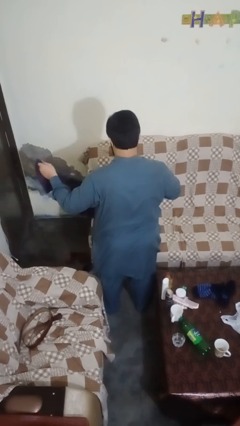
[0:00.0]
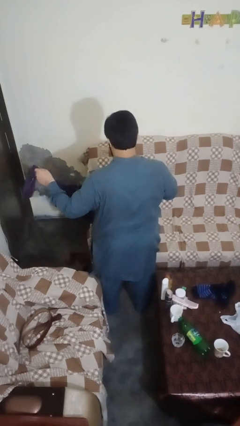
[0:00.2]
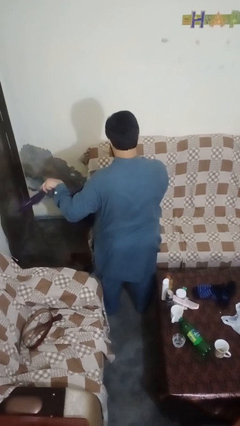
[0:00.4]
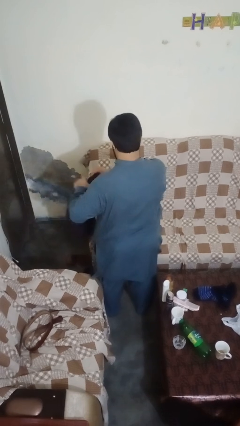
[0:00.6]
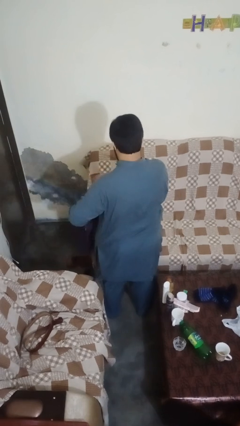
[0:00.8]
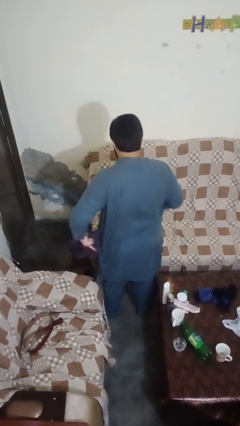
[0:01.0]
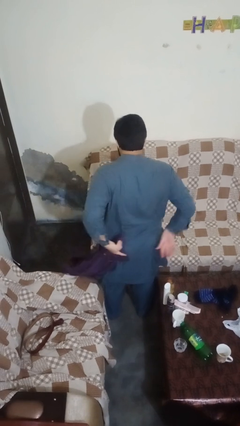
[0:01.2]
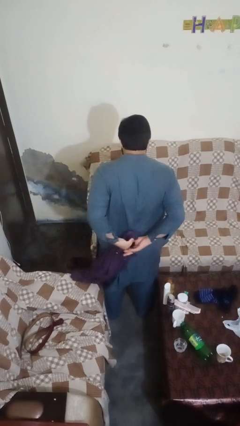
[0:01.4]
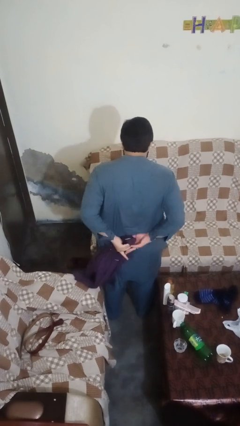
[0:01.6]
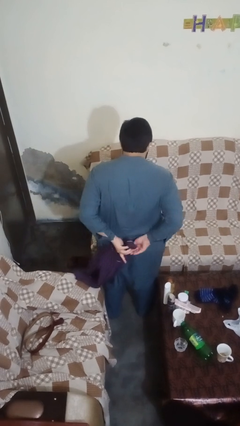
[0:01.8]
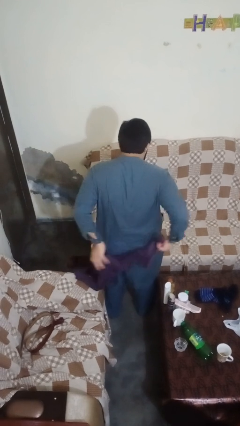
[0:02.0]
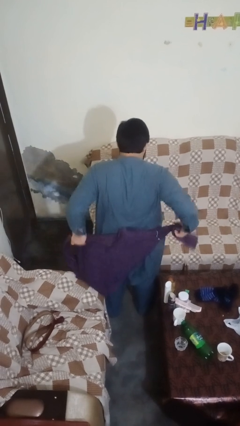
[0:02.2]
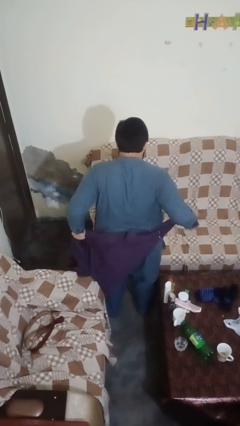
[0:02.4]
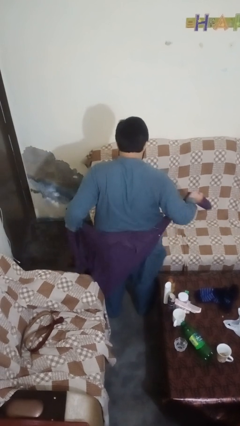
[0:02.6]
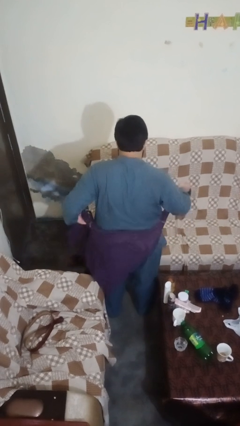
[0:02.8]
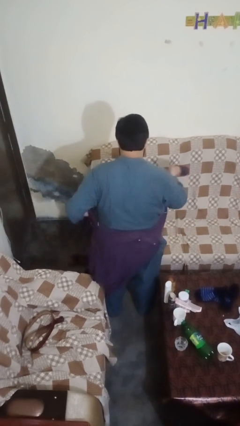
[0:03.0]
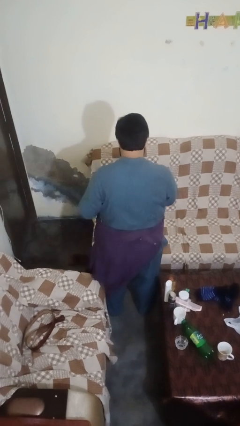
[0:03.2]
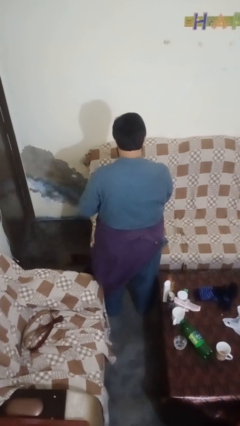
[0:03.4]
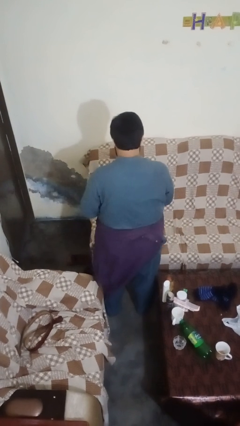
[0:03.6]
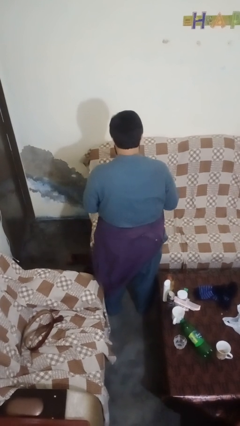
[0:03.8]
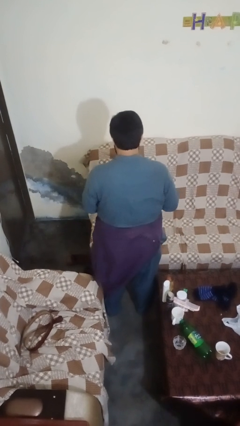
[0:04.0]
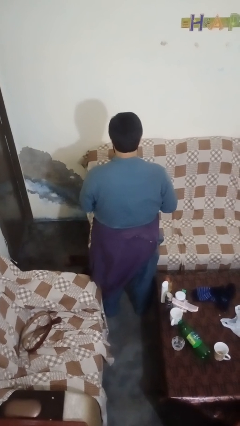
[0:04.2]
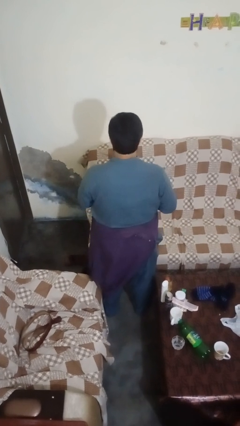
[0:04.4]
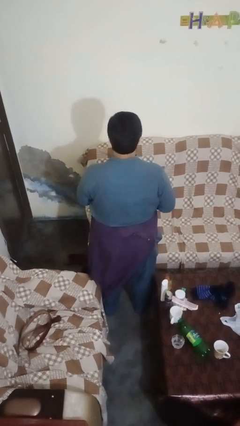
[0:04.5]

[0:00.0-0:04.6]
person ties jacket around waist

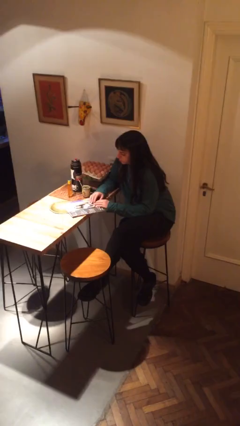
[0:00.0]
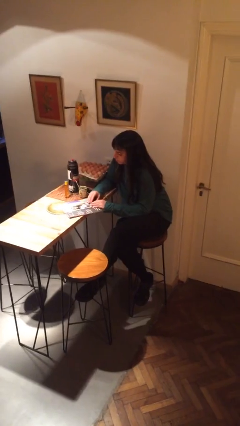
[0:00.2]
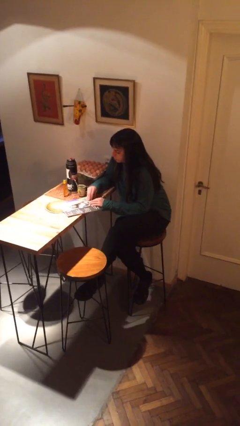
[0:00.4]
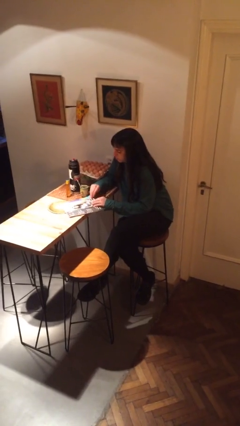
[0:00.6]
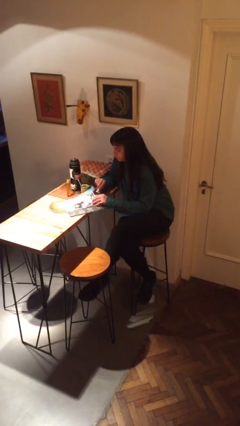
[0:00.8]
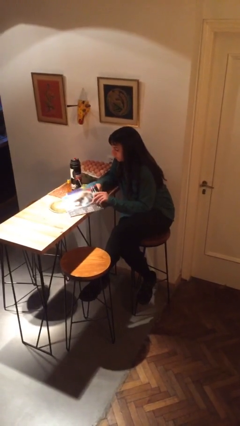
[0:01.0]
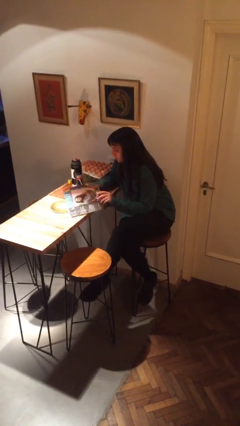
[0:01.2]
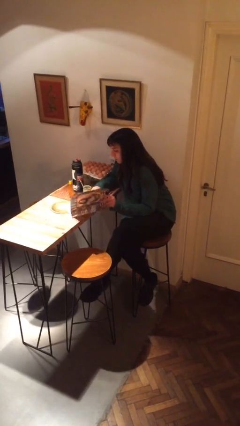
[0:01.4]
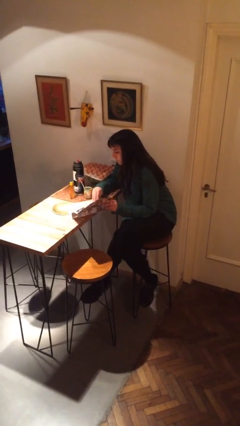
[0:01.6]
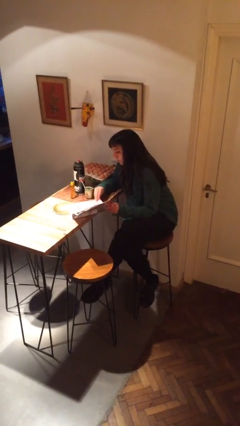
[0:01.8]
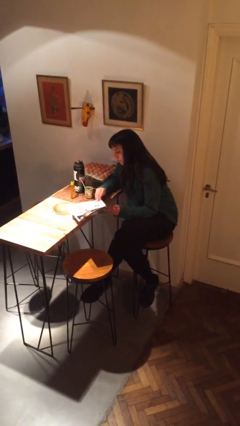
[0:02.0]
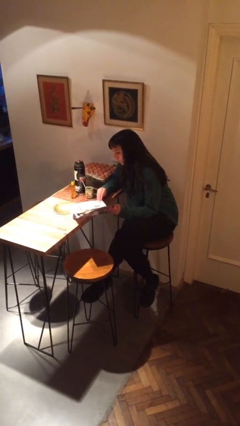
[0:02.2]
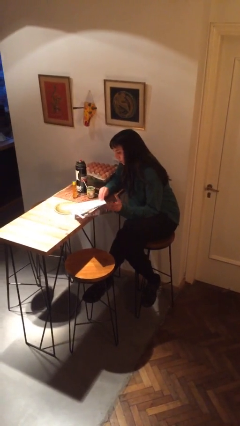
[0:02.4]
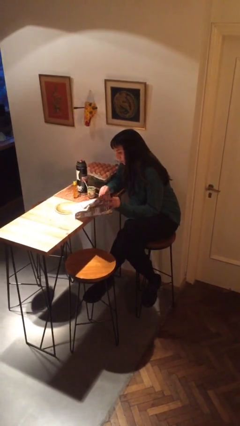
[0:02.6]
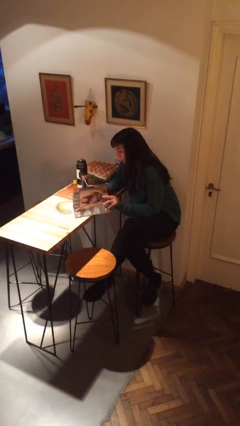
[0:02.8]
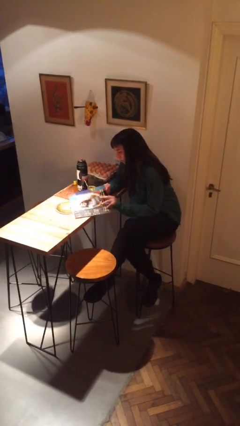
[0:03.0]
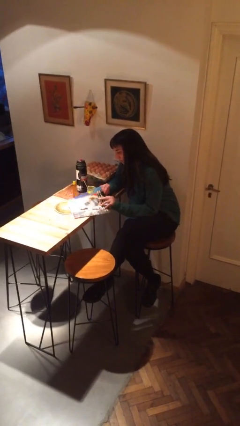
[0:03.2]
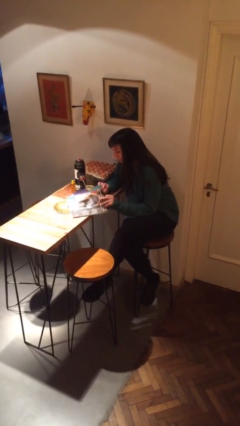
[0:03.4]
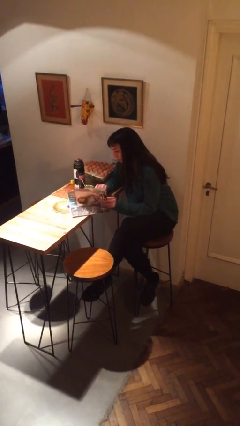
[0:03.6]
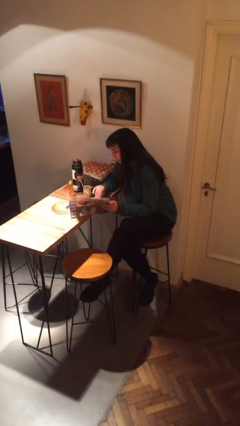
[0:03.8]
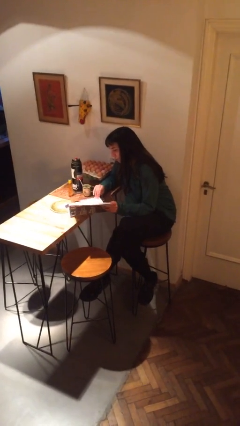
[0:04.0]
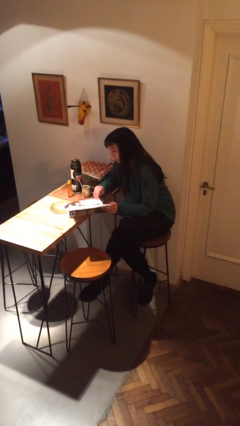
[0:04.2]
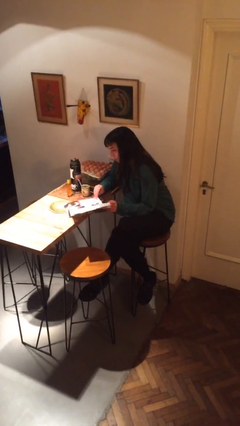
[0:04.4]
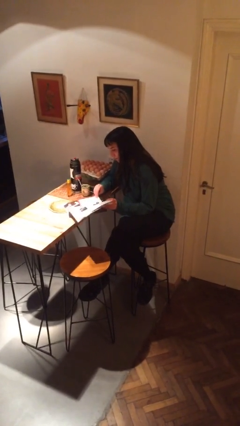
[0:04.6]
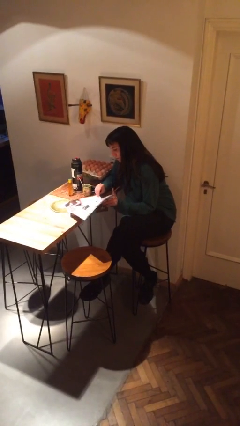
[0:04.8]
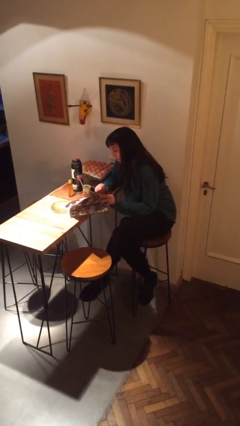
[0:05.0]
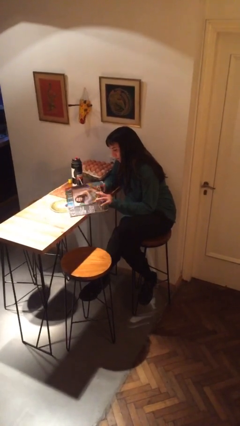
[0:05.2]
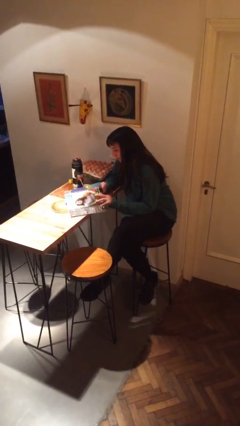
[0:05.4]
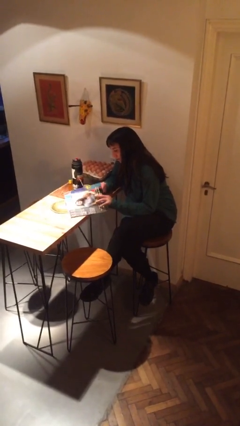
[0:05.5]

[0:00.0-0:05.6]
person reads magazine

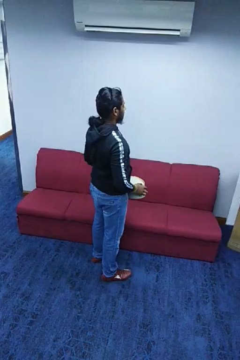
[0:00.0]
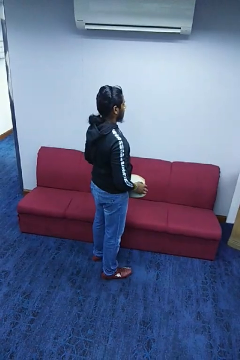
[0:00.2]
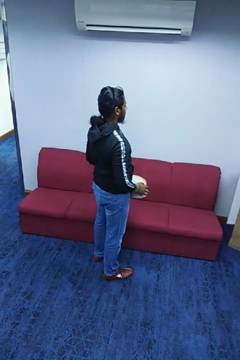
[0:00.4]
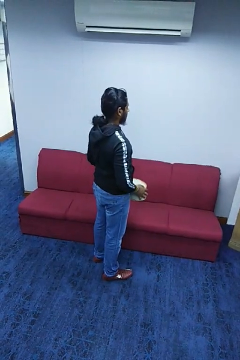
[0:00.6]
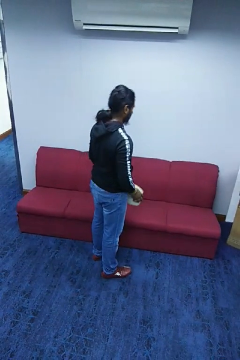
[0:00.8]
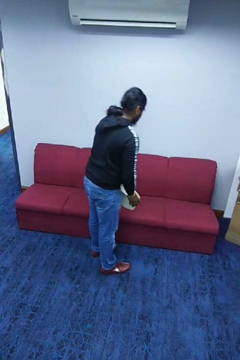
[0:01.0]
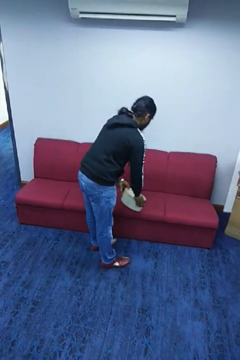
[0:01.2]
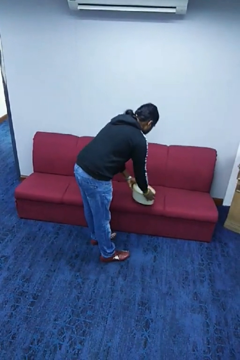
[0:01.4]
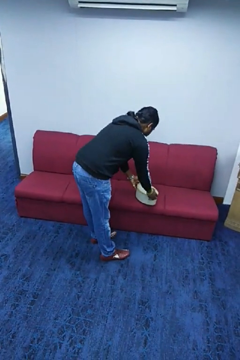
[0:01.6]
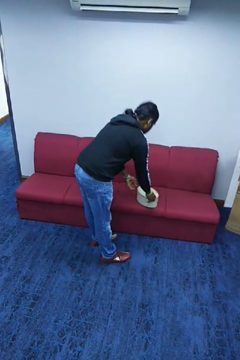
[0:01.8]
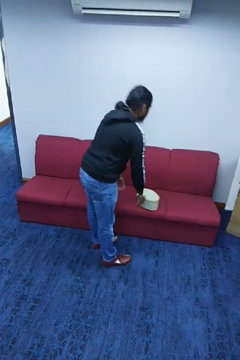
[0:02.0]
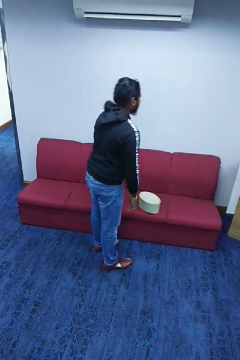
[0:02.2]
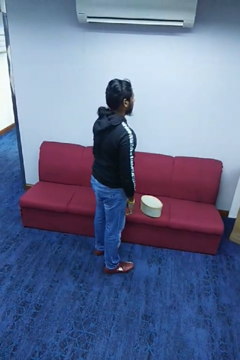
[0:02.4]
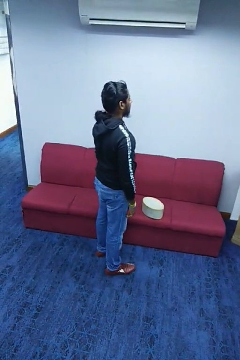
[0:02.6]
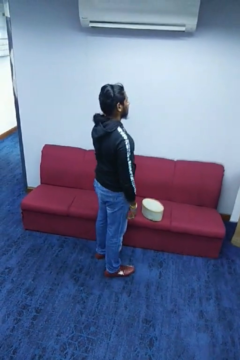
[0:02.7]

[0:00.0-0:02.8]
person puts down object on couch

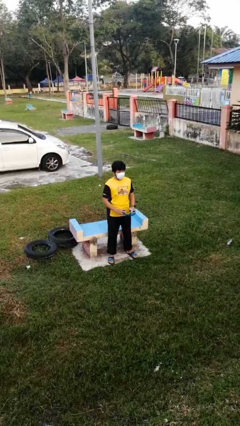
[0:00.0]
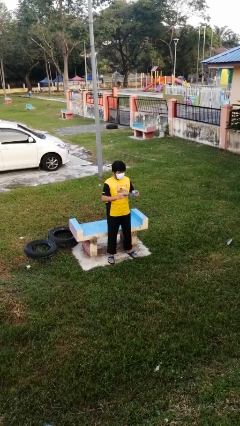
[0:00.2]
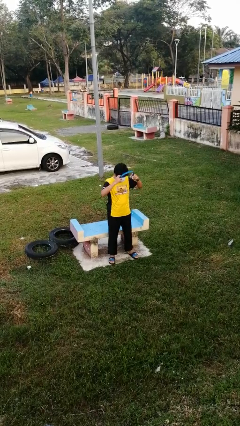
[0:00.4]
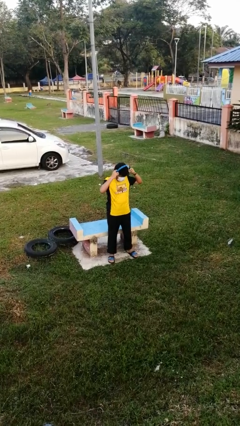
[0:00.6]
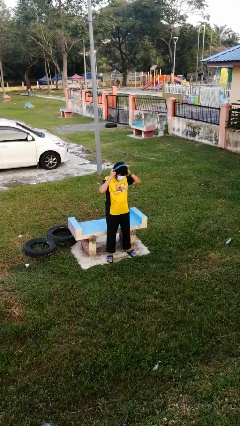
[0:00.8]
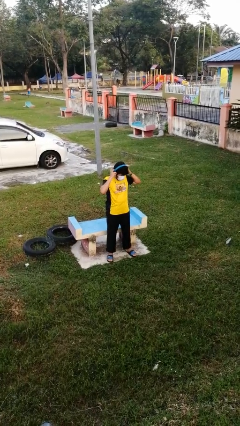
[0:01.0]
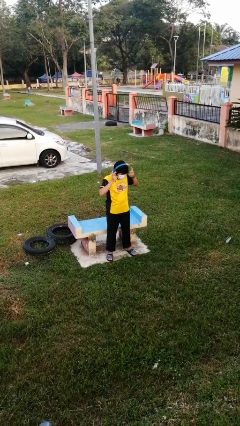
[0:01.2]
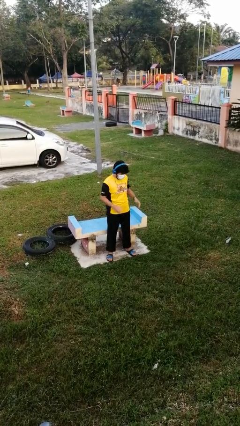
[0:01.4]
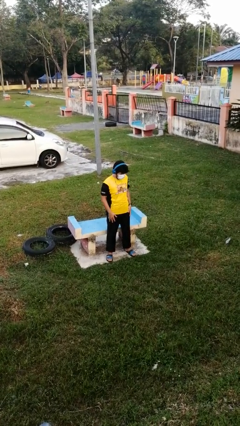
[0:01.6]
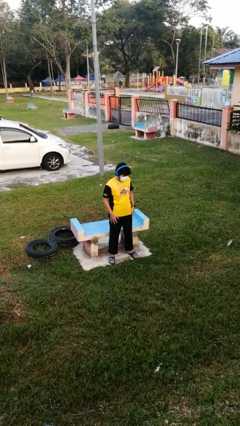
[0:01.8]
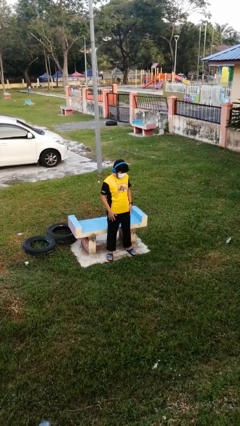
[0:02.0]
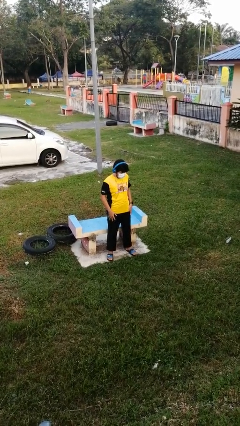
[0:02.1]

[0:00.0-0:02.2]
person puts on headphones

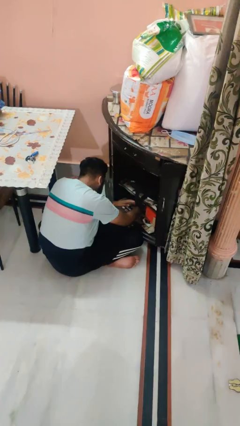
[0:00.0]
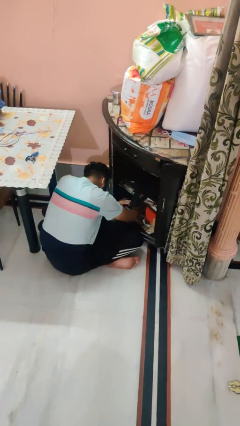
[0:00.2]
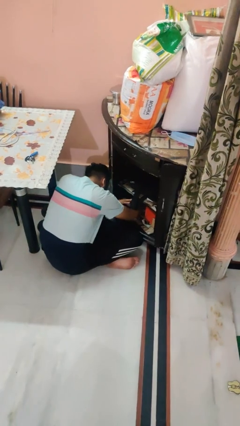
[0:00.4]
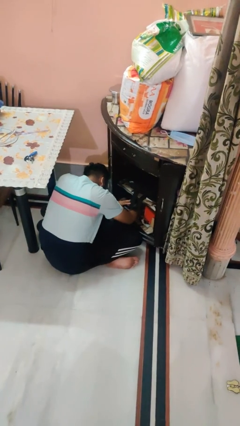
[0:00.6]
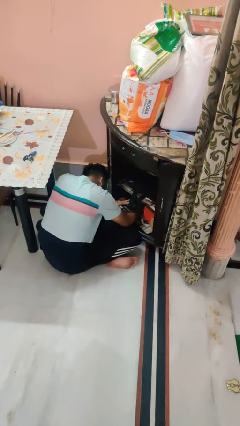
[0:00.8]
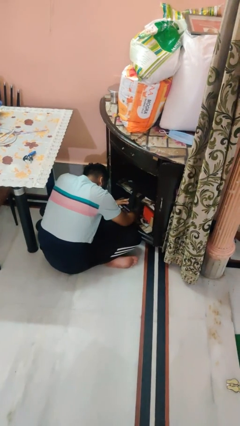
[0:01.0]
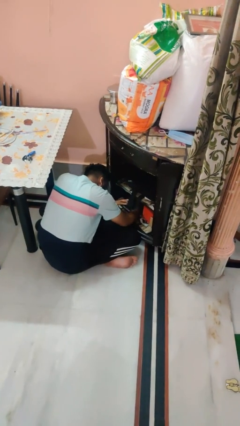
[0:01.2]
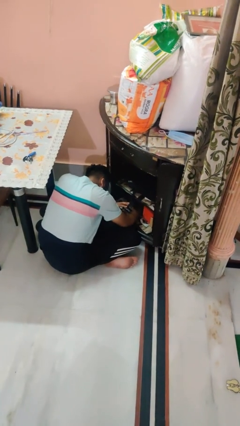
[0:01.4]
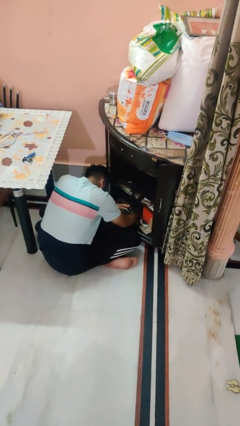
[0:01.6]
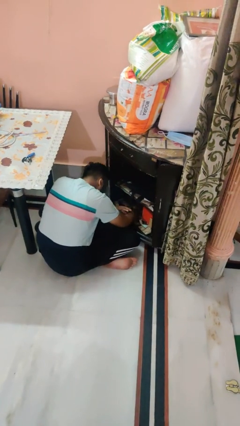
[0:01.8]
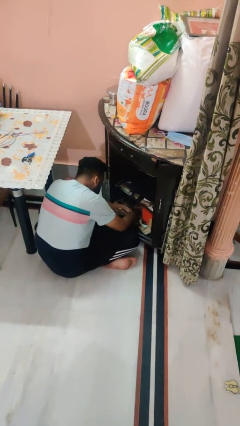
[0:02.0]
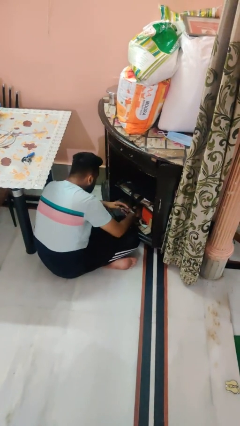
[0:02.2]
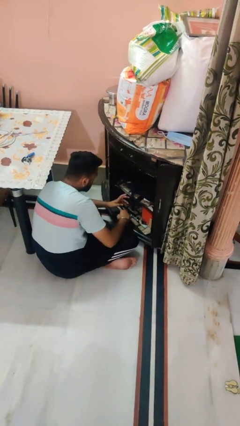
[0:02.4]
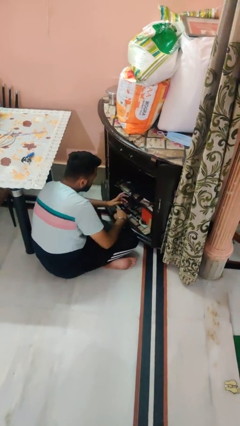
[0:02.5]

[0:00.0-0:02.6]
person searches in cabinet

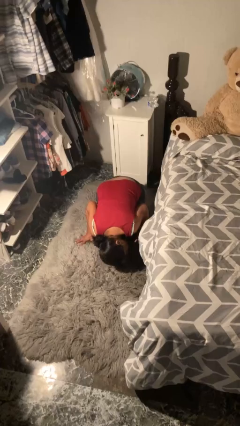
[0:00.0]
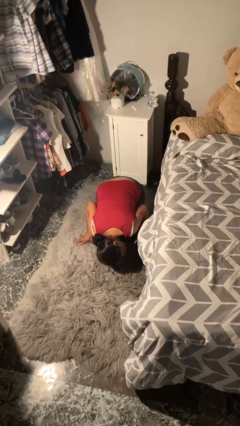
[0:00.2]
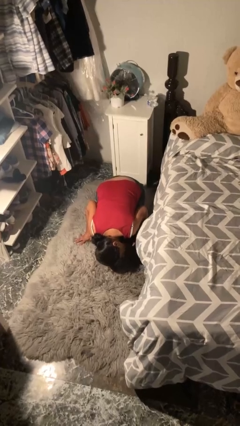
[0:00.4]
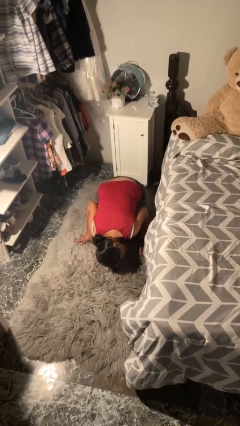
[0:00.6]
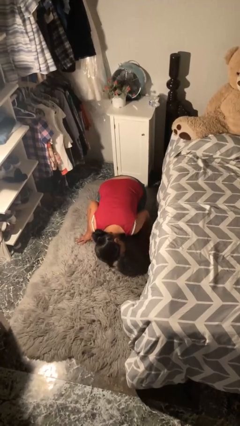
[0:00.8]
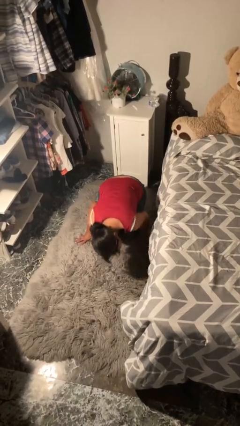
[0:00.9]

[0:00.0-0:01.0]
person searches under bed
